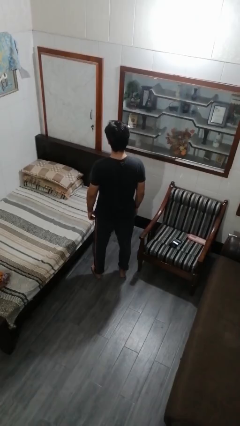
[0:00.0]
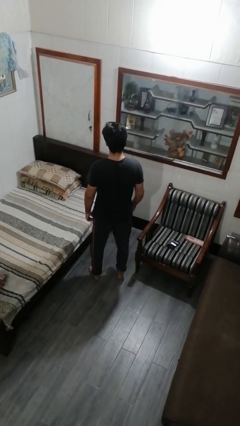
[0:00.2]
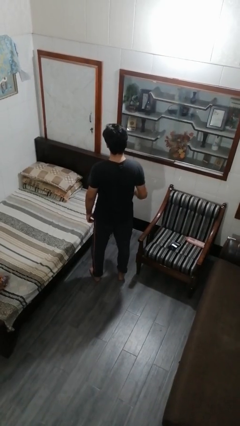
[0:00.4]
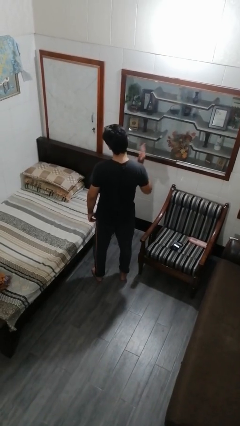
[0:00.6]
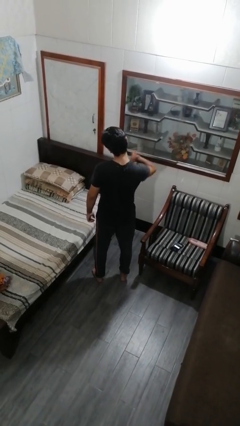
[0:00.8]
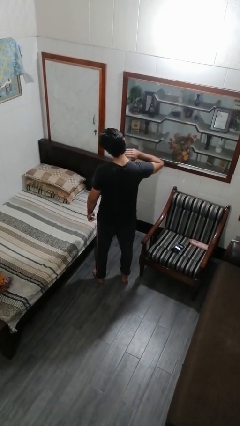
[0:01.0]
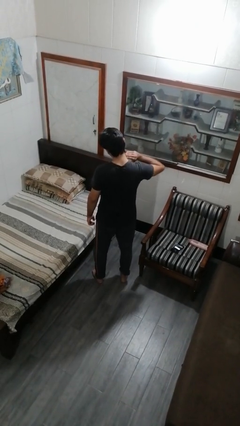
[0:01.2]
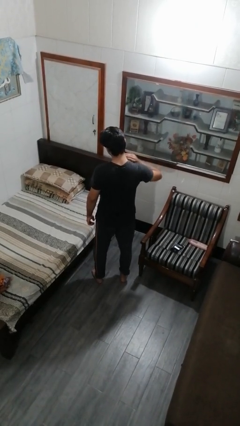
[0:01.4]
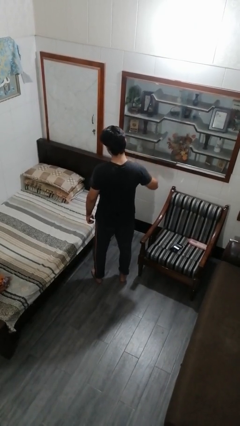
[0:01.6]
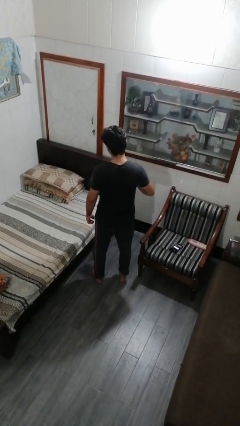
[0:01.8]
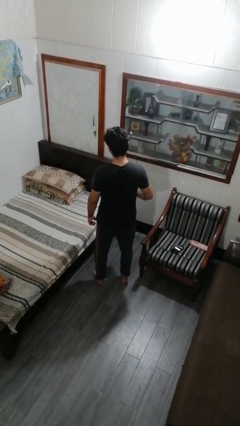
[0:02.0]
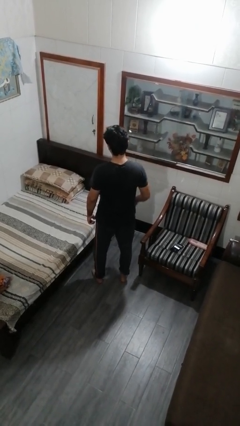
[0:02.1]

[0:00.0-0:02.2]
person swats bug

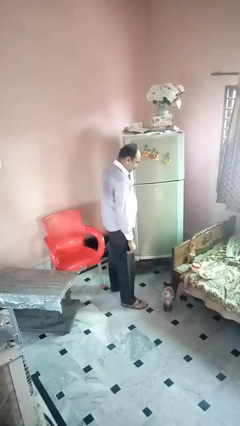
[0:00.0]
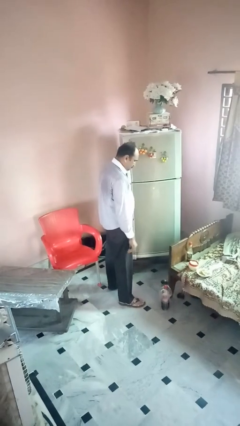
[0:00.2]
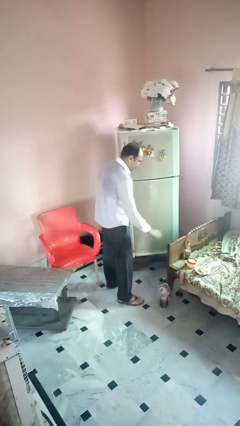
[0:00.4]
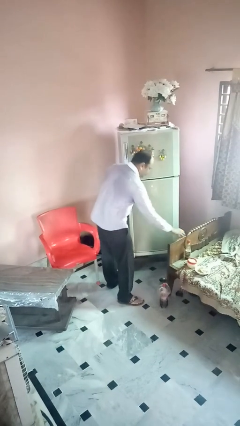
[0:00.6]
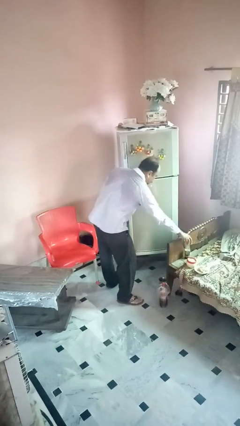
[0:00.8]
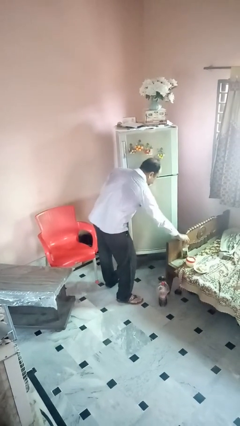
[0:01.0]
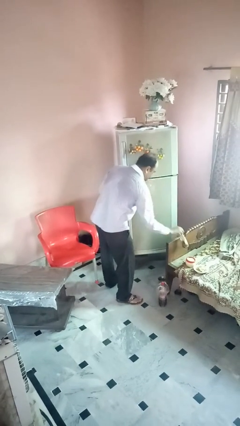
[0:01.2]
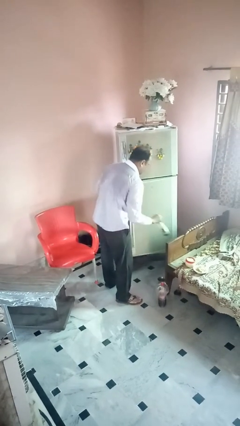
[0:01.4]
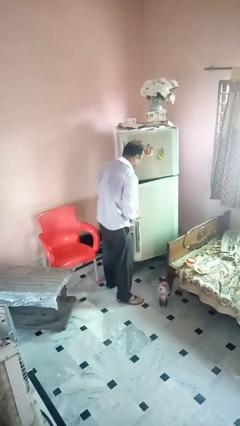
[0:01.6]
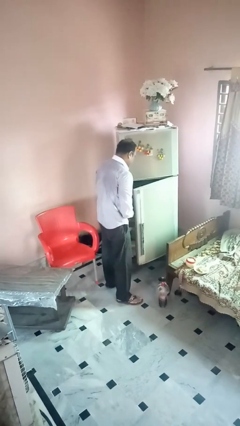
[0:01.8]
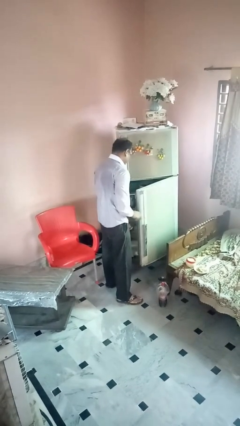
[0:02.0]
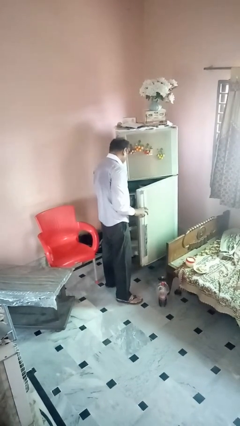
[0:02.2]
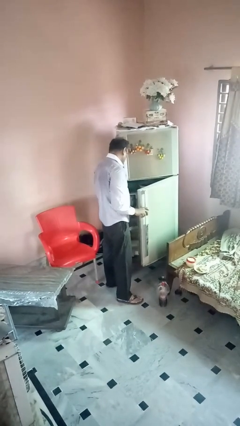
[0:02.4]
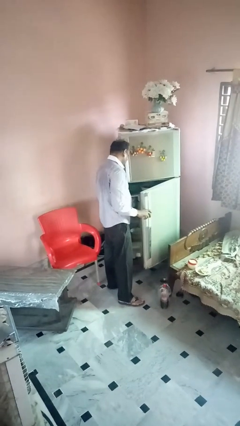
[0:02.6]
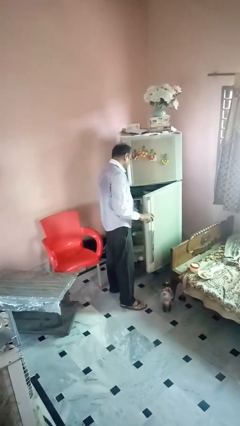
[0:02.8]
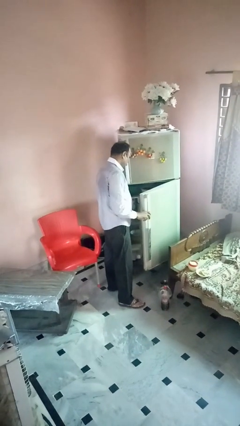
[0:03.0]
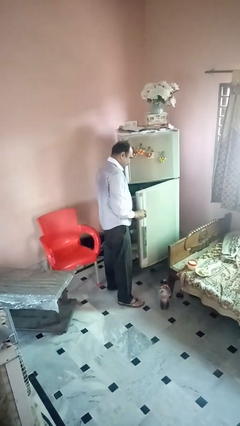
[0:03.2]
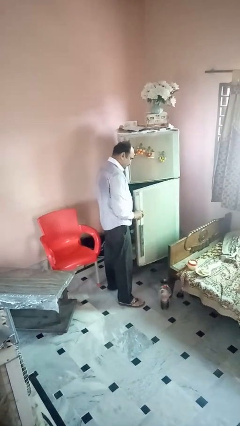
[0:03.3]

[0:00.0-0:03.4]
person loads groceries into refrigerator

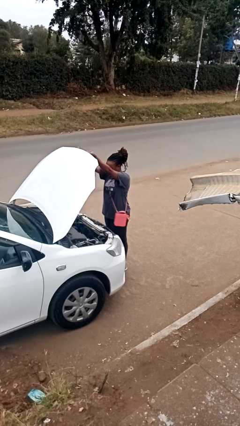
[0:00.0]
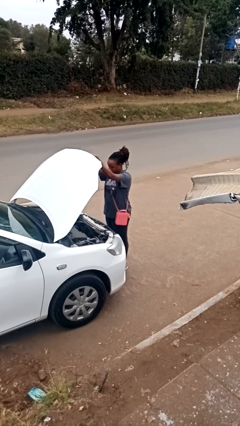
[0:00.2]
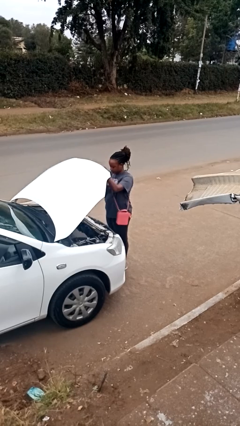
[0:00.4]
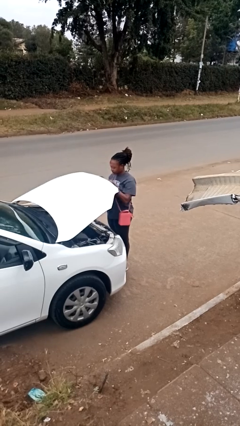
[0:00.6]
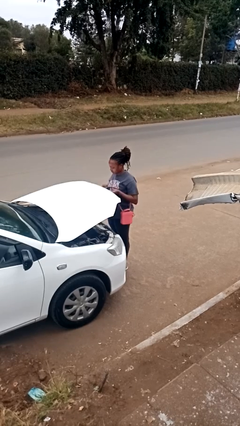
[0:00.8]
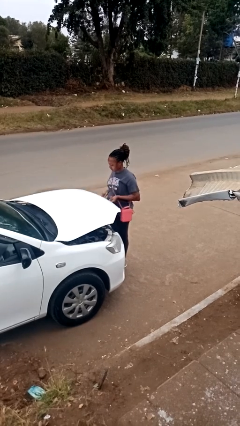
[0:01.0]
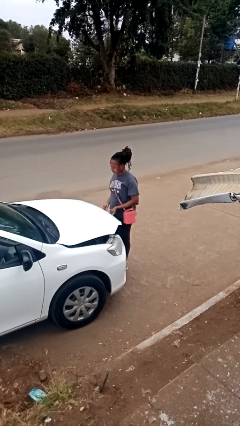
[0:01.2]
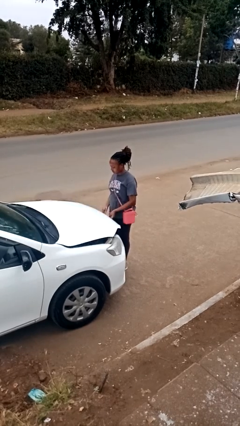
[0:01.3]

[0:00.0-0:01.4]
person closes car hood

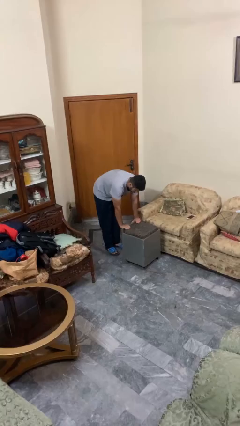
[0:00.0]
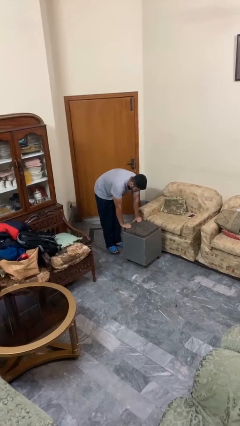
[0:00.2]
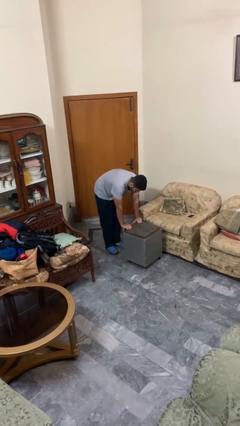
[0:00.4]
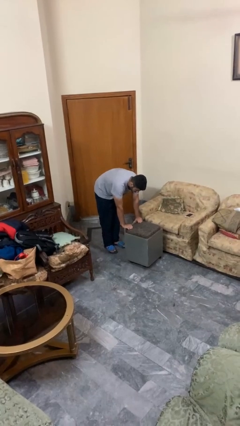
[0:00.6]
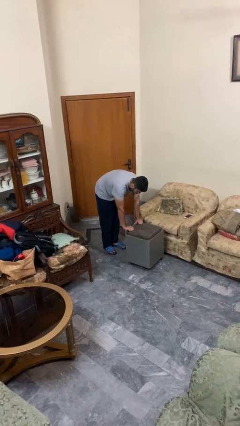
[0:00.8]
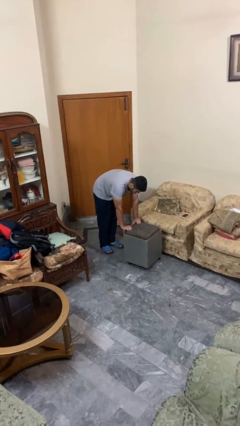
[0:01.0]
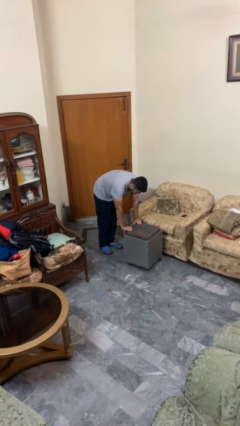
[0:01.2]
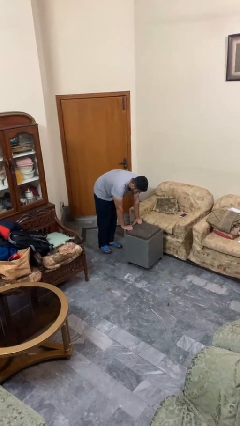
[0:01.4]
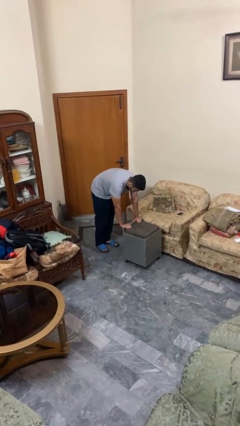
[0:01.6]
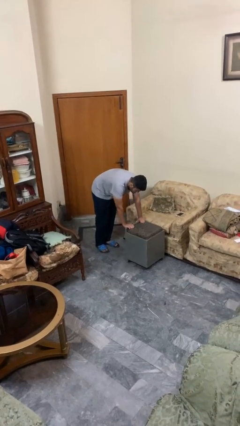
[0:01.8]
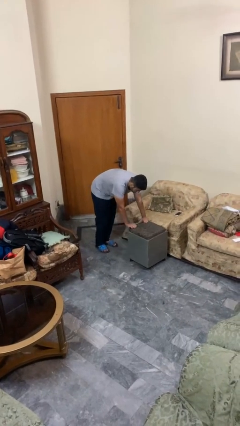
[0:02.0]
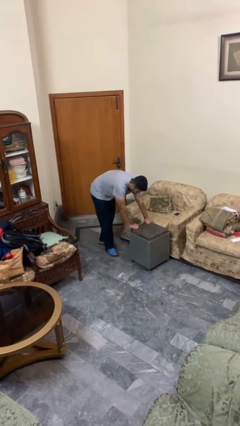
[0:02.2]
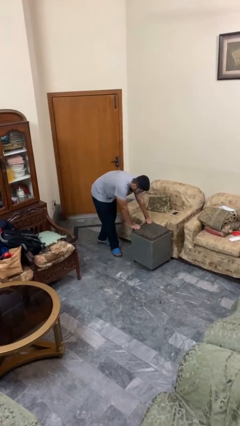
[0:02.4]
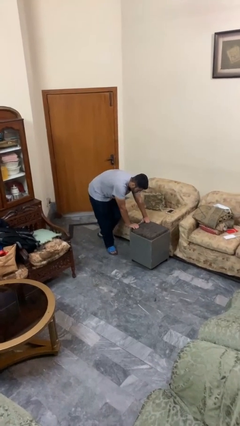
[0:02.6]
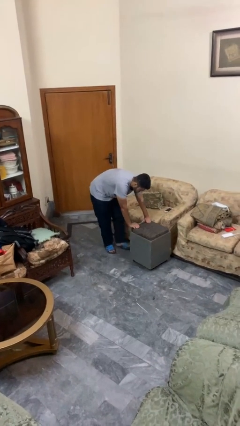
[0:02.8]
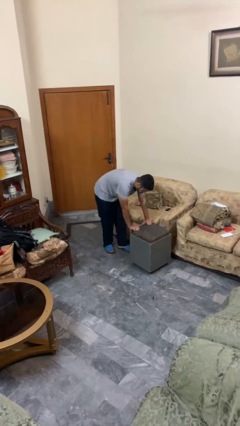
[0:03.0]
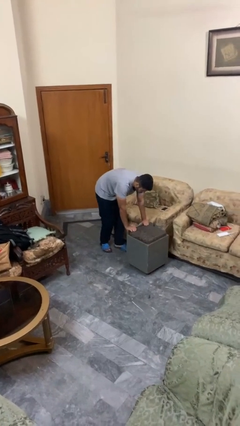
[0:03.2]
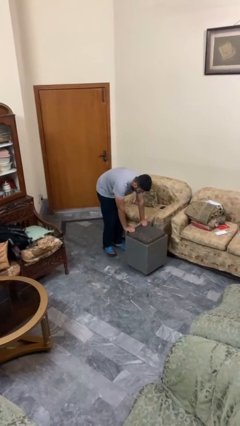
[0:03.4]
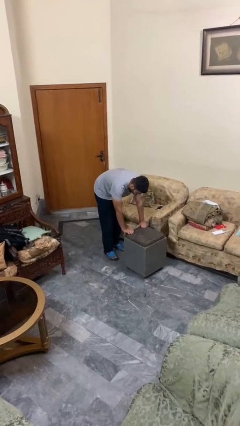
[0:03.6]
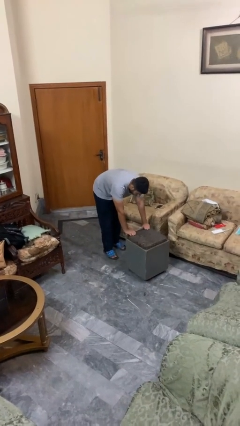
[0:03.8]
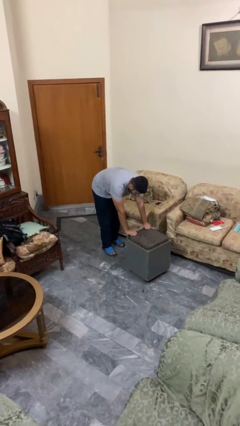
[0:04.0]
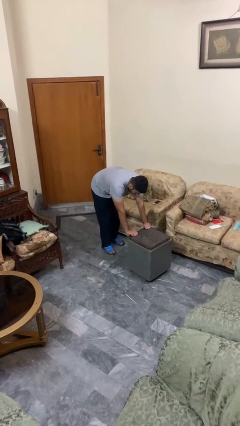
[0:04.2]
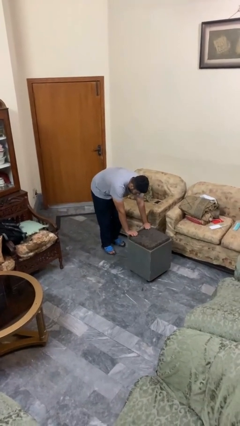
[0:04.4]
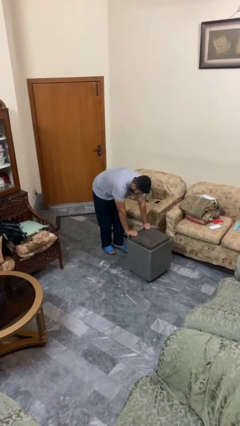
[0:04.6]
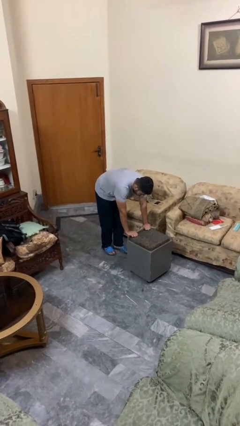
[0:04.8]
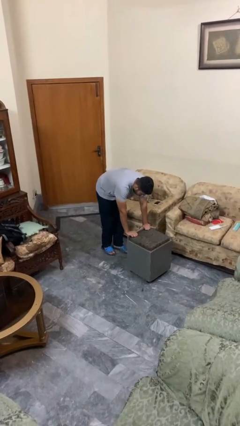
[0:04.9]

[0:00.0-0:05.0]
person pushes wheeled cart

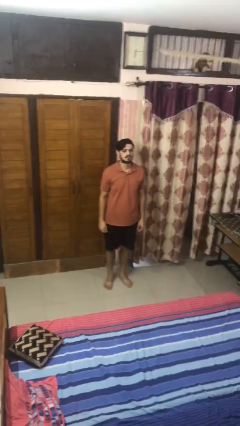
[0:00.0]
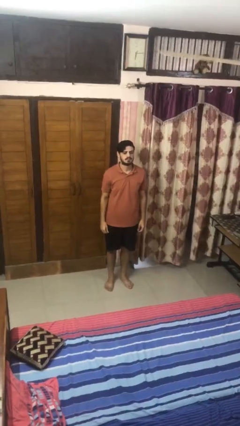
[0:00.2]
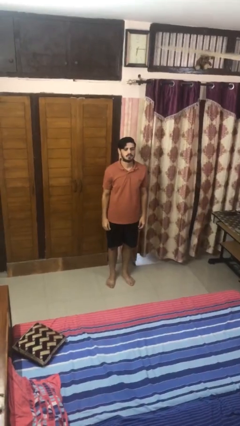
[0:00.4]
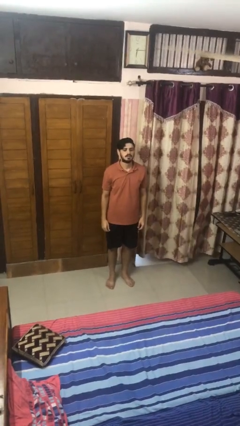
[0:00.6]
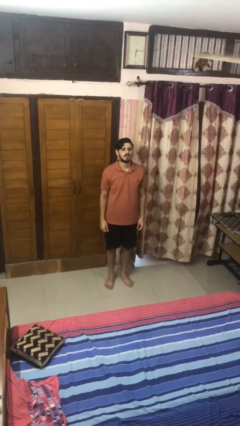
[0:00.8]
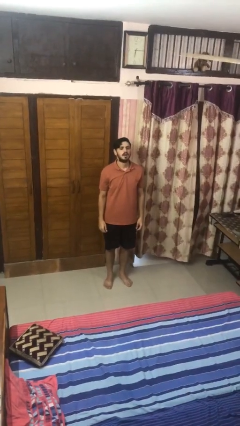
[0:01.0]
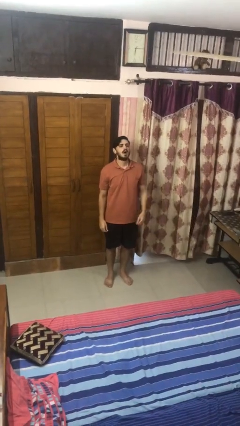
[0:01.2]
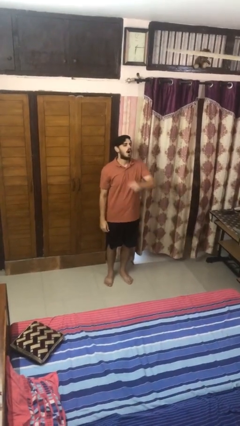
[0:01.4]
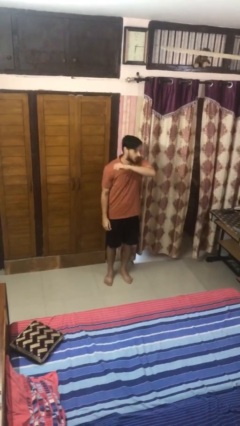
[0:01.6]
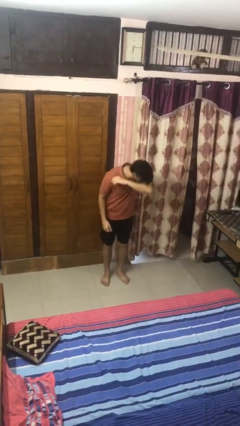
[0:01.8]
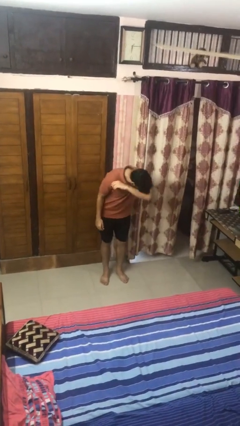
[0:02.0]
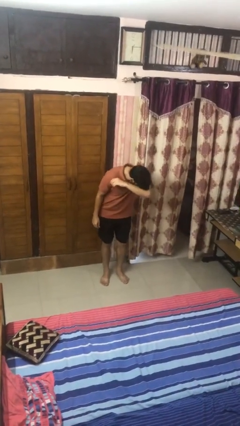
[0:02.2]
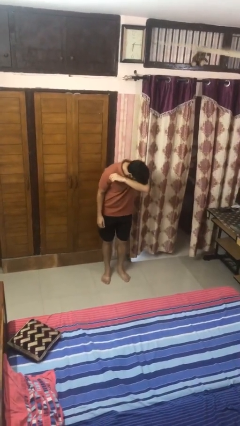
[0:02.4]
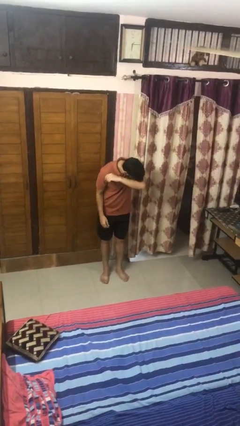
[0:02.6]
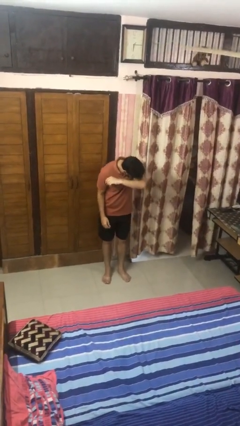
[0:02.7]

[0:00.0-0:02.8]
person sneezes into arm

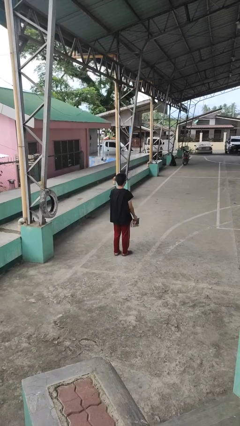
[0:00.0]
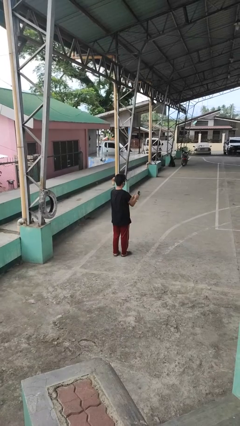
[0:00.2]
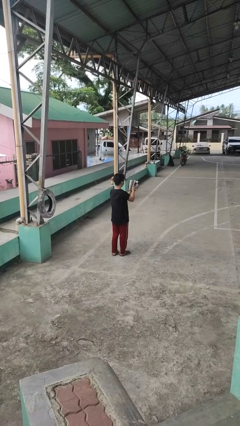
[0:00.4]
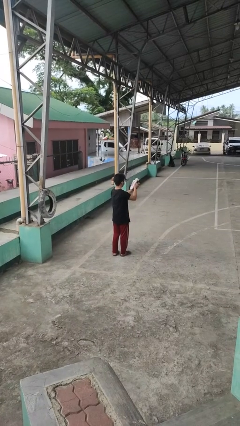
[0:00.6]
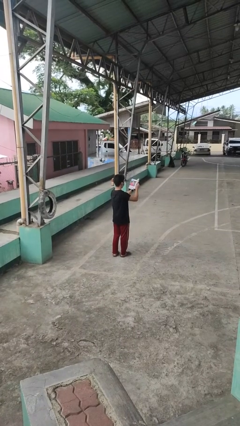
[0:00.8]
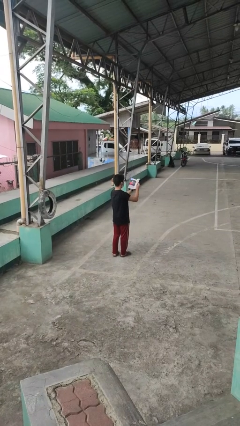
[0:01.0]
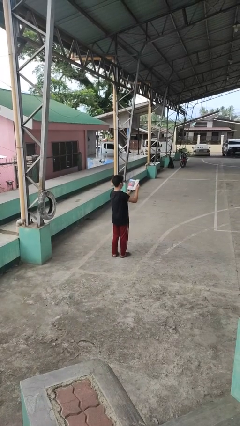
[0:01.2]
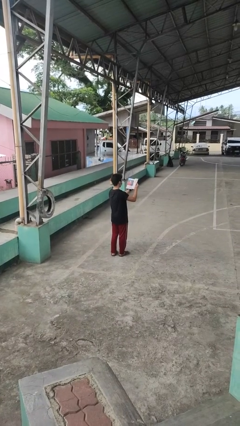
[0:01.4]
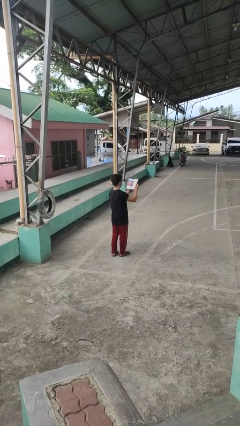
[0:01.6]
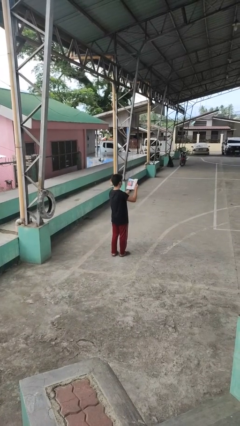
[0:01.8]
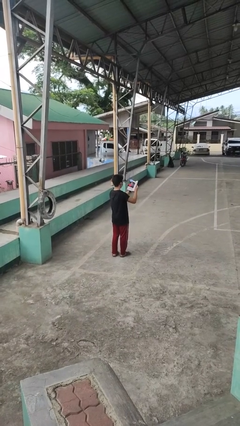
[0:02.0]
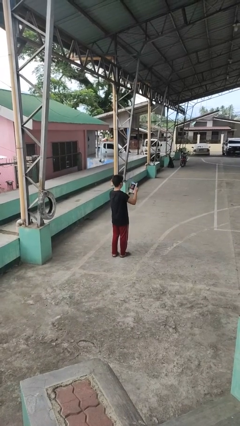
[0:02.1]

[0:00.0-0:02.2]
person reads magazine

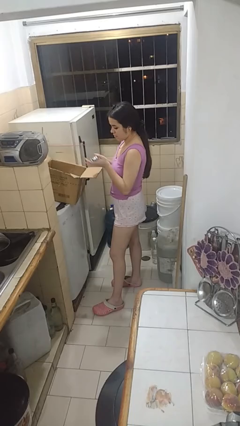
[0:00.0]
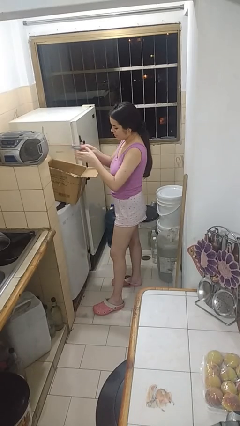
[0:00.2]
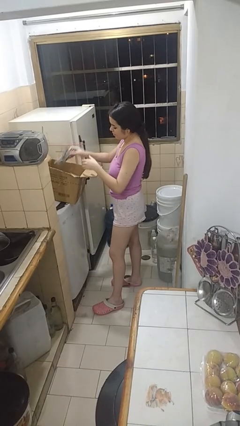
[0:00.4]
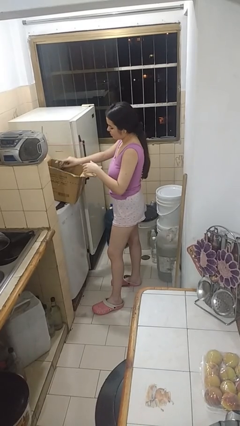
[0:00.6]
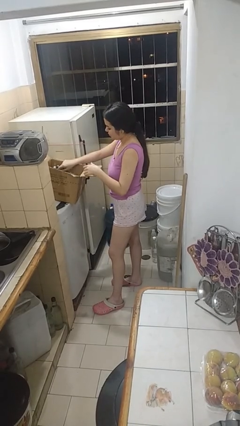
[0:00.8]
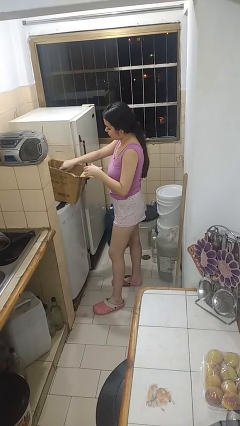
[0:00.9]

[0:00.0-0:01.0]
person puts object into box
